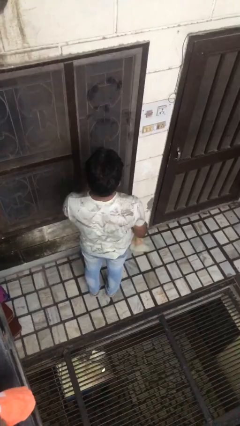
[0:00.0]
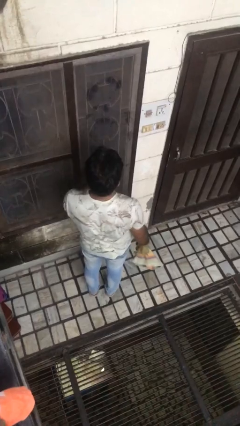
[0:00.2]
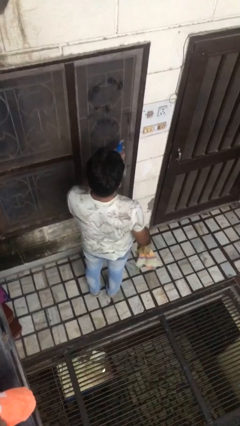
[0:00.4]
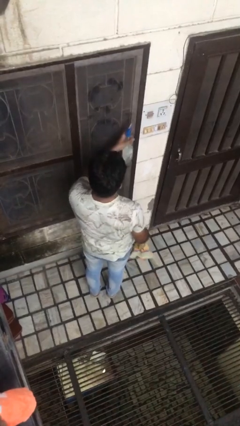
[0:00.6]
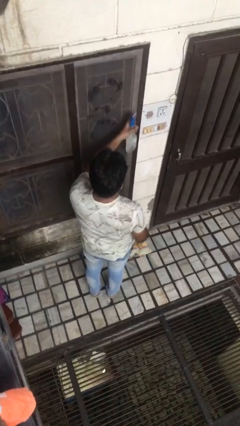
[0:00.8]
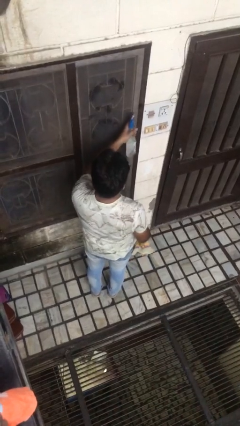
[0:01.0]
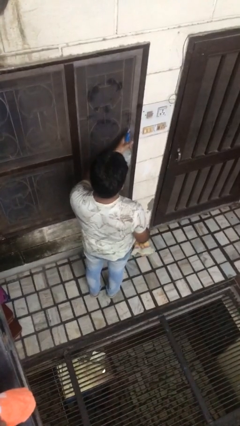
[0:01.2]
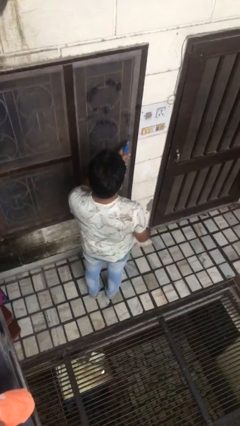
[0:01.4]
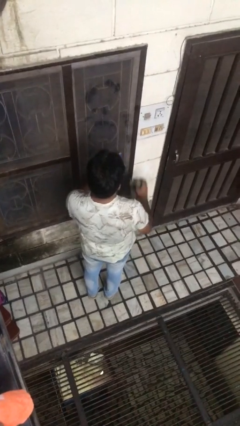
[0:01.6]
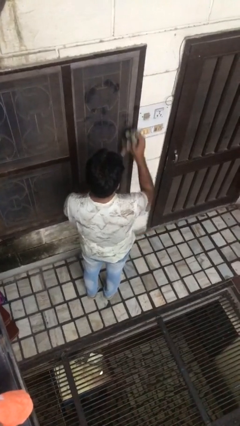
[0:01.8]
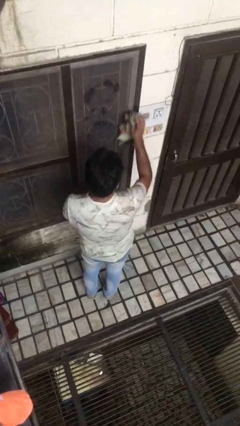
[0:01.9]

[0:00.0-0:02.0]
person sprays from bottle

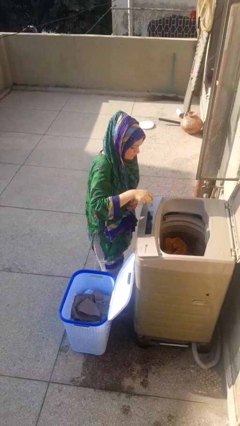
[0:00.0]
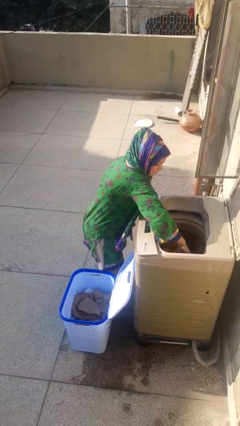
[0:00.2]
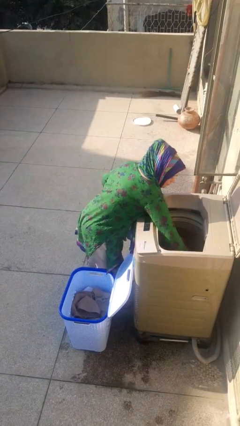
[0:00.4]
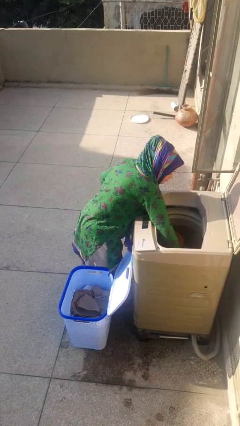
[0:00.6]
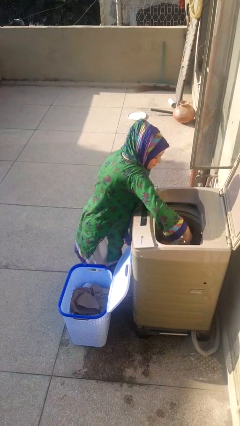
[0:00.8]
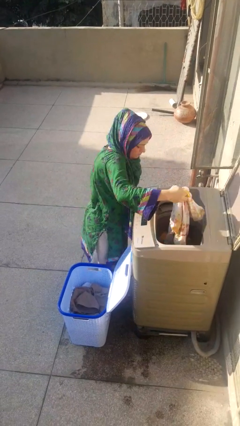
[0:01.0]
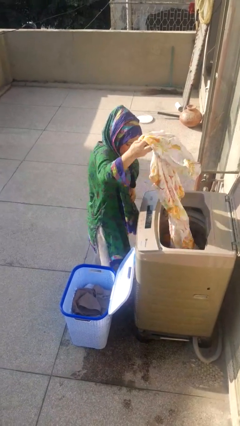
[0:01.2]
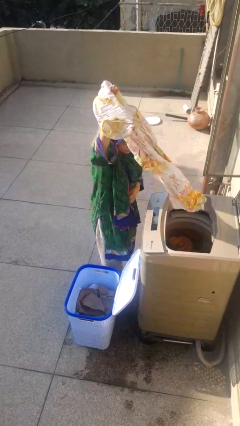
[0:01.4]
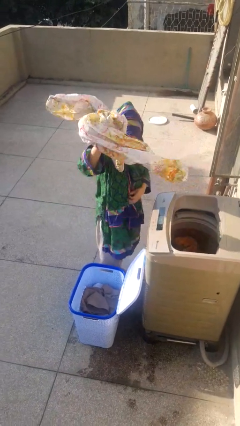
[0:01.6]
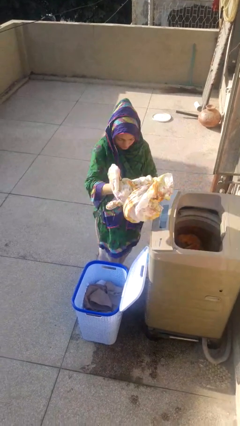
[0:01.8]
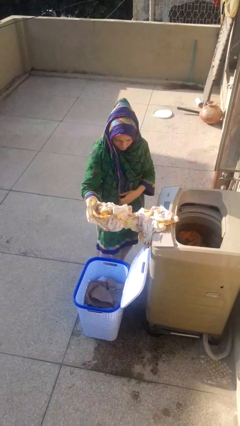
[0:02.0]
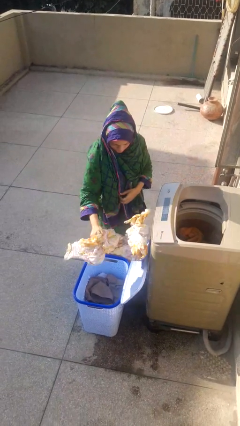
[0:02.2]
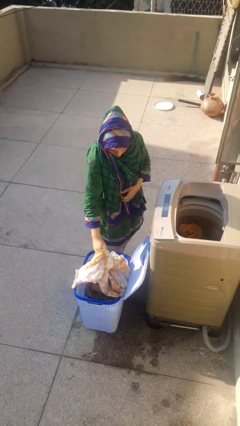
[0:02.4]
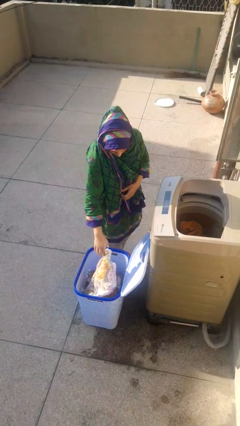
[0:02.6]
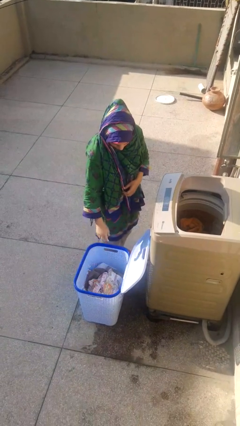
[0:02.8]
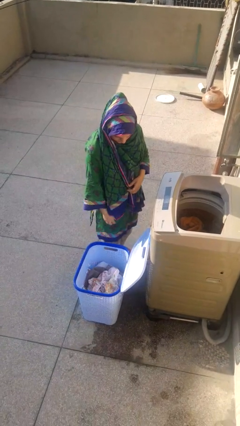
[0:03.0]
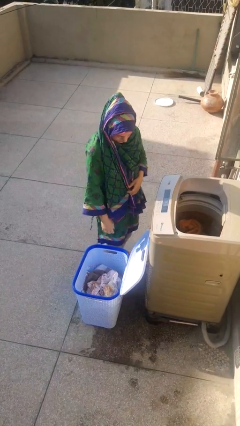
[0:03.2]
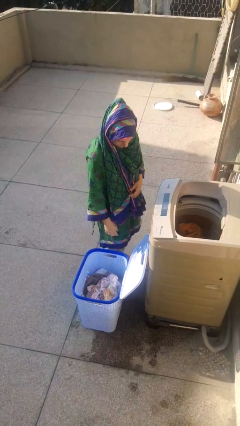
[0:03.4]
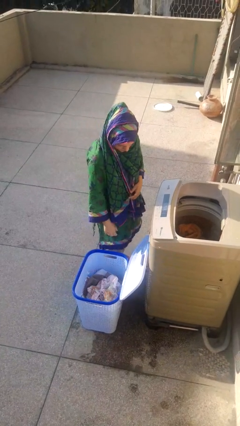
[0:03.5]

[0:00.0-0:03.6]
person unloads clotheswasher

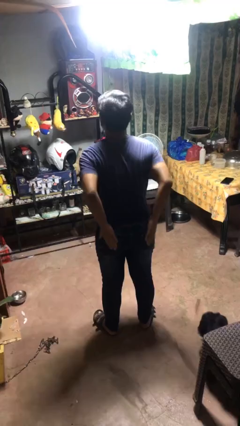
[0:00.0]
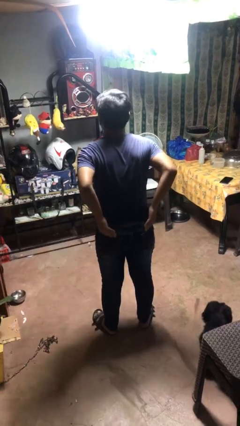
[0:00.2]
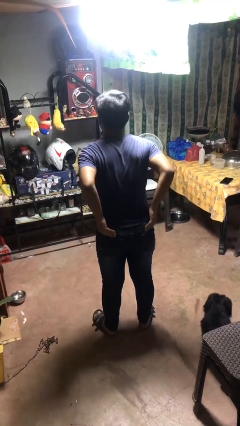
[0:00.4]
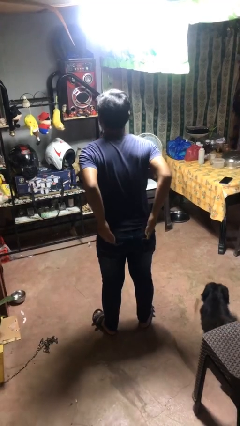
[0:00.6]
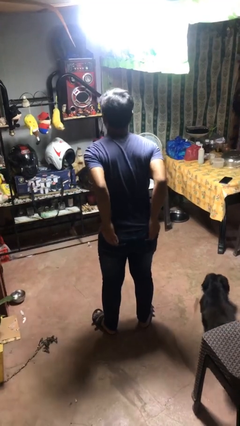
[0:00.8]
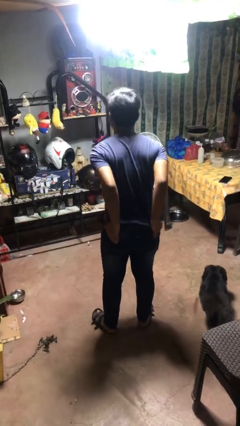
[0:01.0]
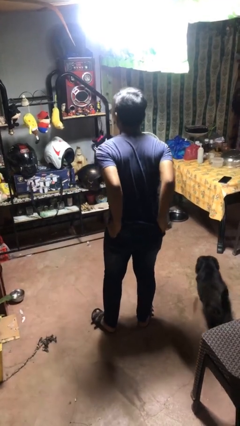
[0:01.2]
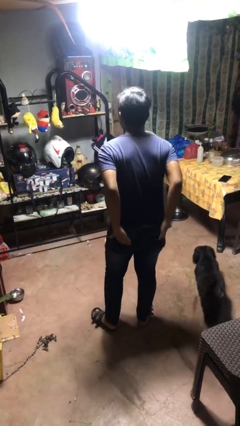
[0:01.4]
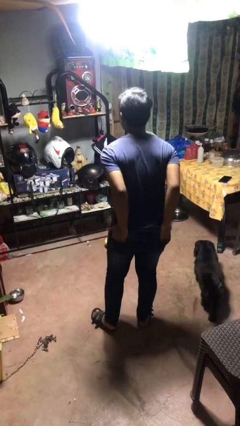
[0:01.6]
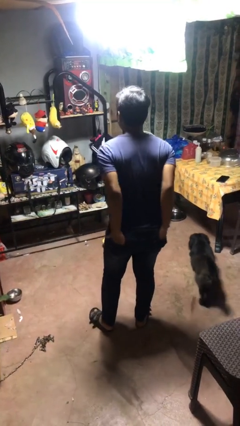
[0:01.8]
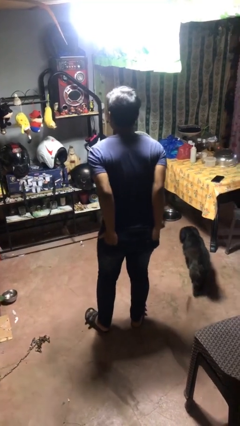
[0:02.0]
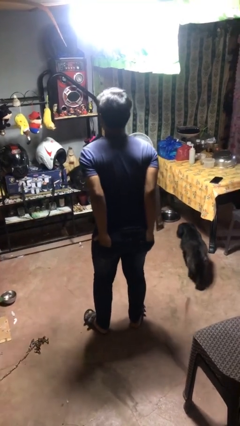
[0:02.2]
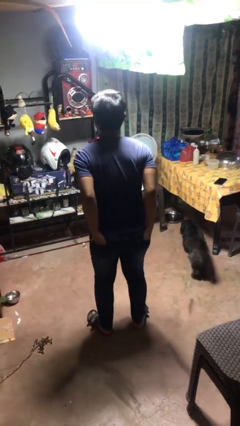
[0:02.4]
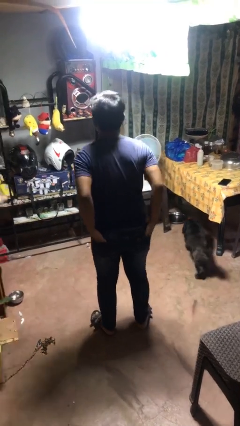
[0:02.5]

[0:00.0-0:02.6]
person puts hands in back pockets

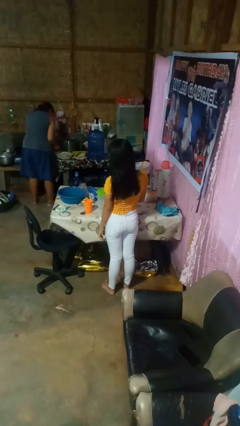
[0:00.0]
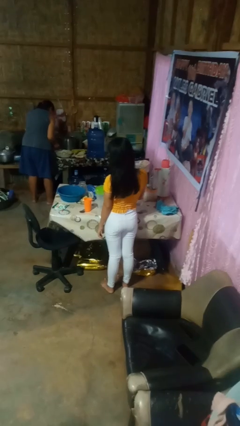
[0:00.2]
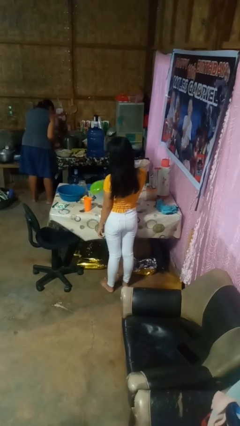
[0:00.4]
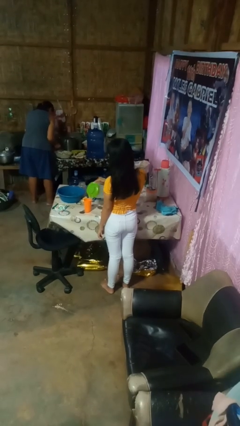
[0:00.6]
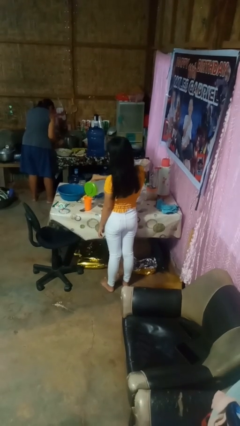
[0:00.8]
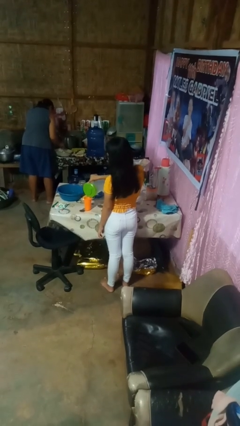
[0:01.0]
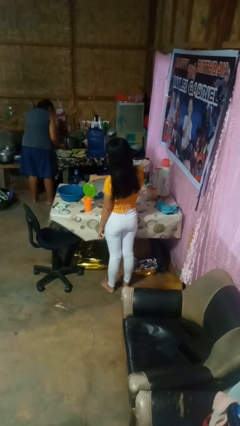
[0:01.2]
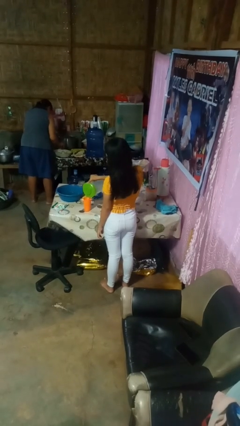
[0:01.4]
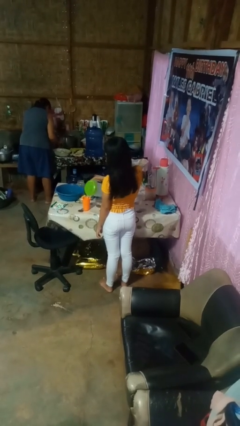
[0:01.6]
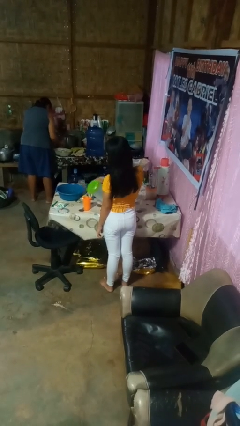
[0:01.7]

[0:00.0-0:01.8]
person pours liquid into cup

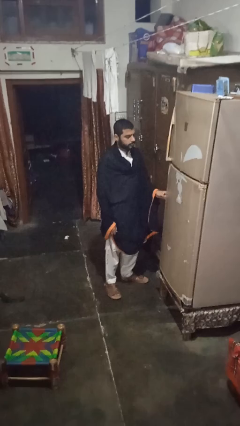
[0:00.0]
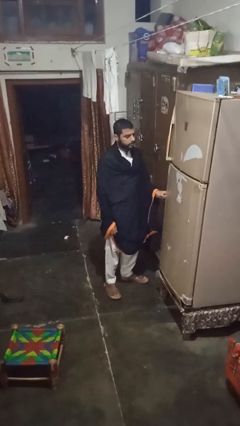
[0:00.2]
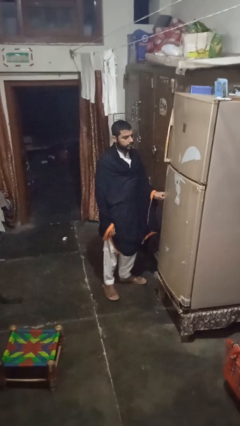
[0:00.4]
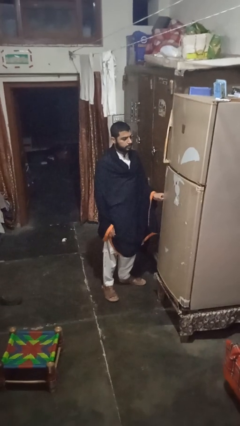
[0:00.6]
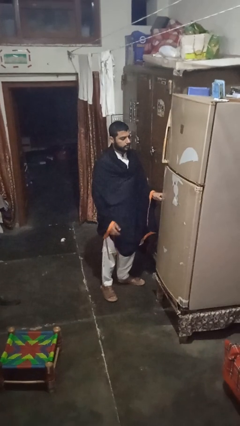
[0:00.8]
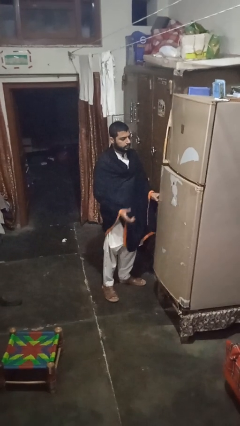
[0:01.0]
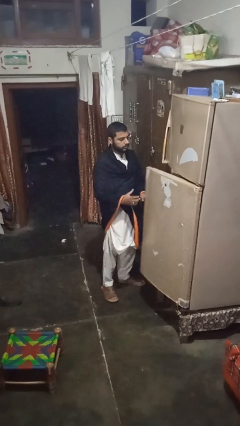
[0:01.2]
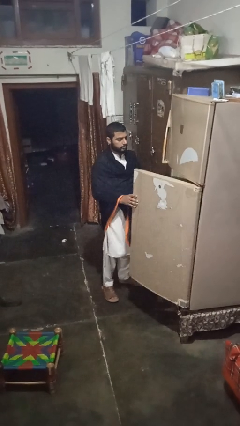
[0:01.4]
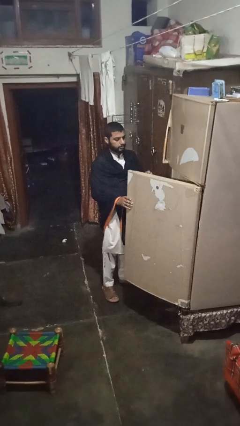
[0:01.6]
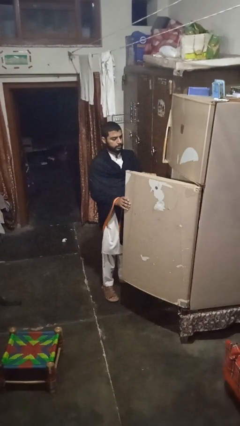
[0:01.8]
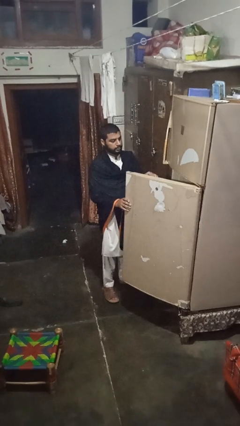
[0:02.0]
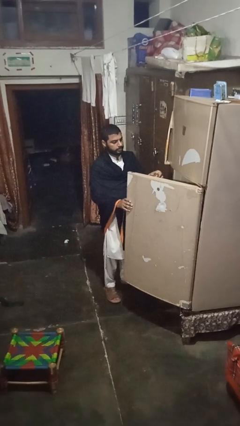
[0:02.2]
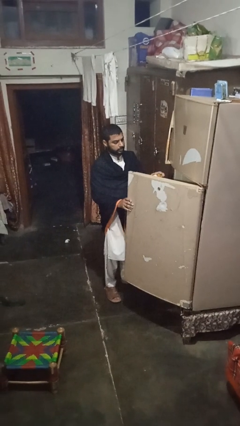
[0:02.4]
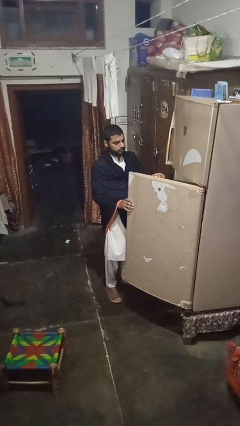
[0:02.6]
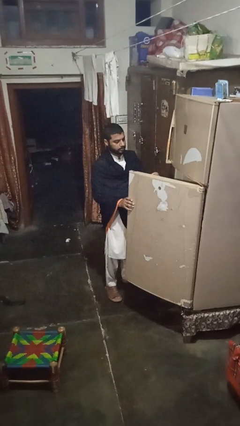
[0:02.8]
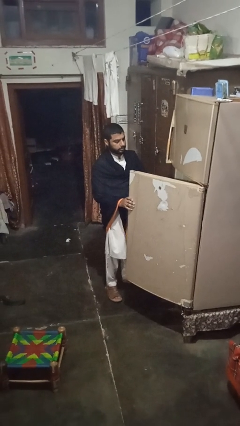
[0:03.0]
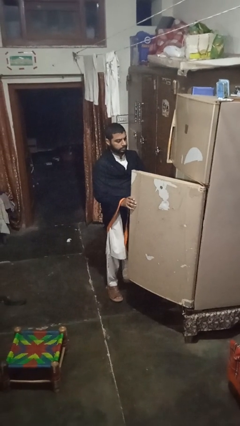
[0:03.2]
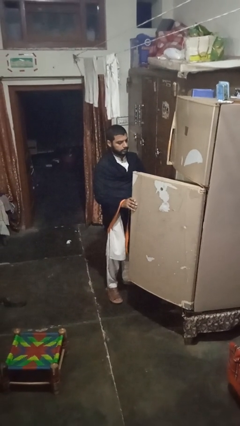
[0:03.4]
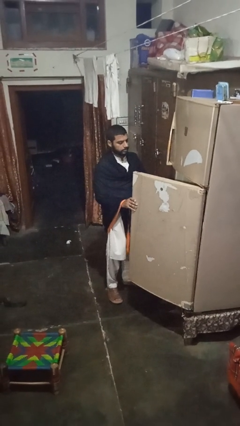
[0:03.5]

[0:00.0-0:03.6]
person opens refrigerator

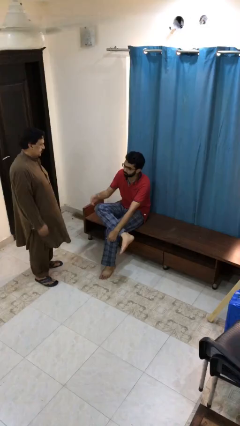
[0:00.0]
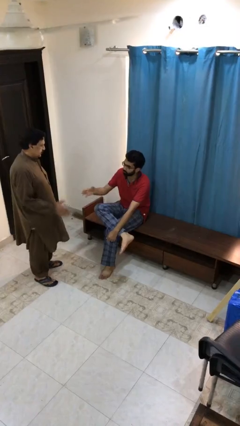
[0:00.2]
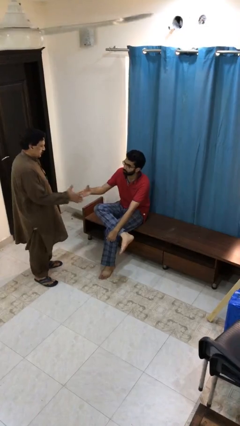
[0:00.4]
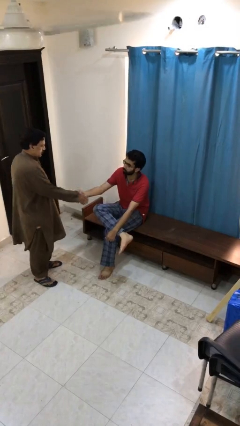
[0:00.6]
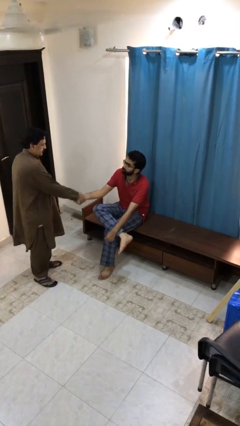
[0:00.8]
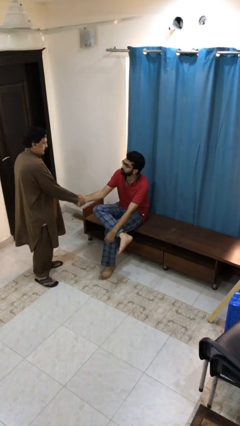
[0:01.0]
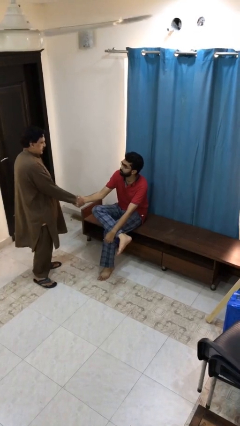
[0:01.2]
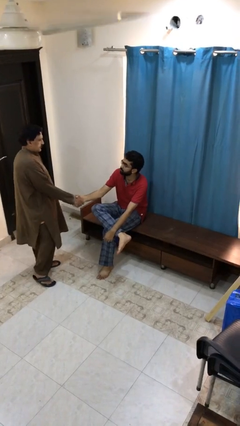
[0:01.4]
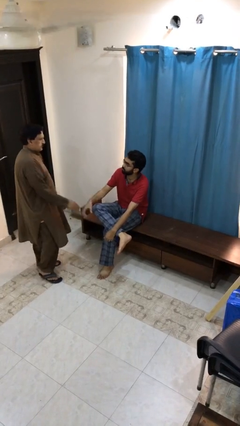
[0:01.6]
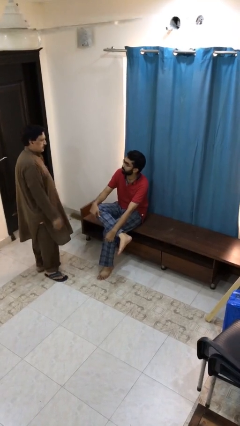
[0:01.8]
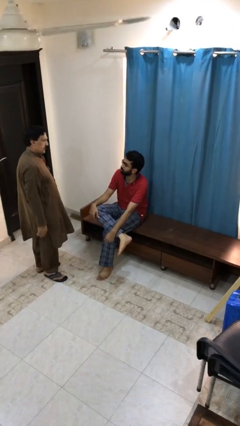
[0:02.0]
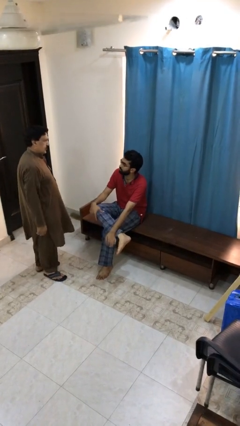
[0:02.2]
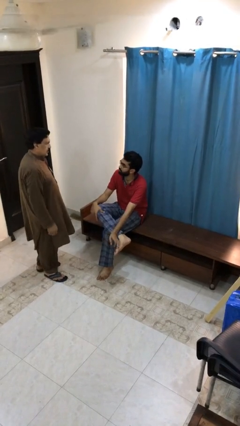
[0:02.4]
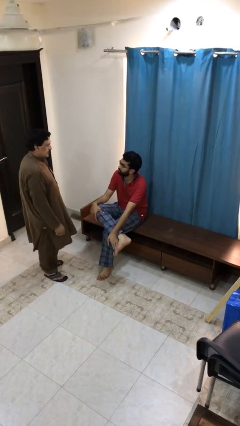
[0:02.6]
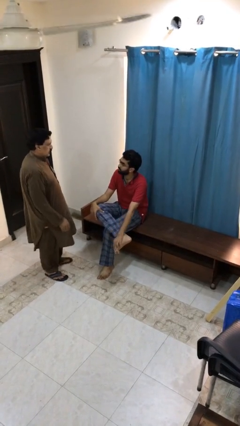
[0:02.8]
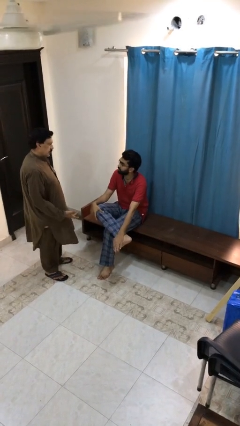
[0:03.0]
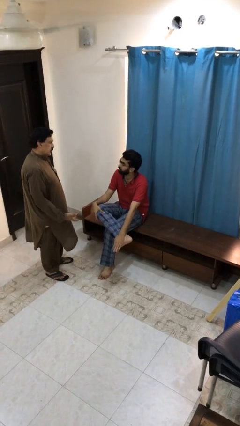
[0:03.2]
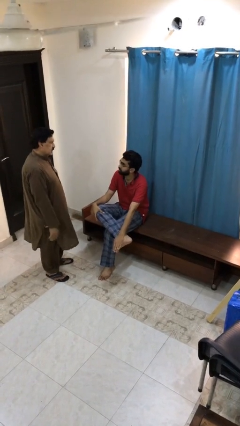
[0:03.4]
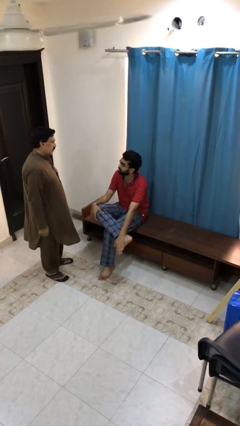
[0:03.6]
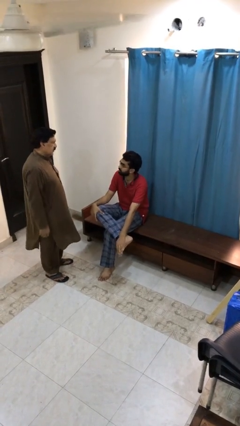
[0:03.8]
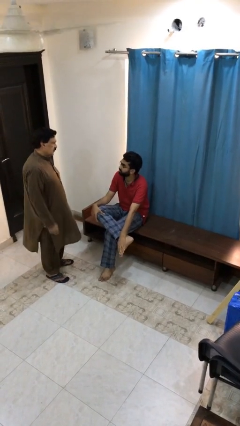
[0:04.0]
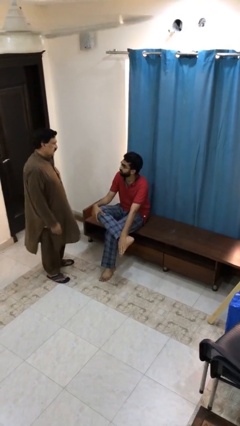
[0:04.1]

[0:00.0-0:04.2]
person shakes hand
